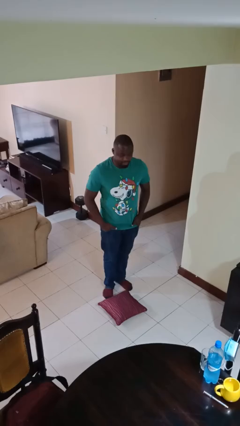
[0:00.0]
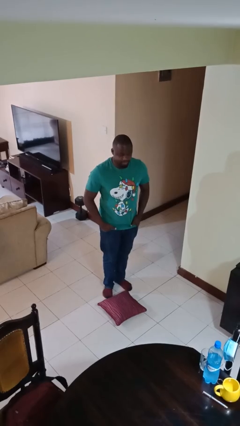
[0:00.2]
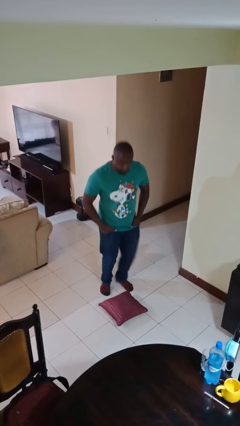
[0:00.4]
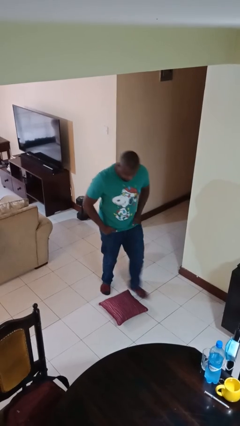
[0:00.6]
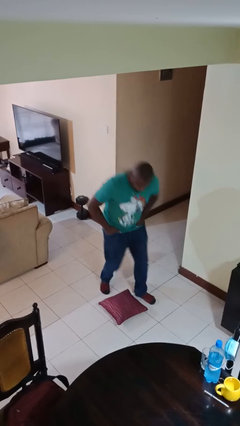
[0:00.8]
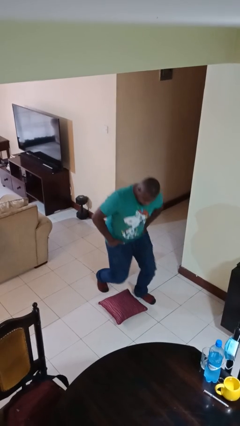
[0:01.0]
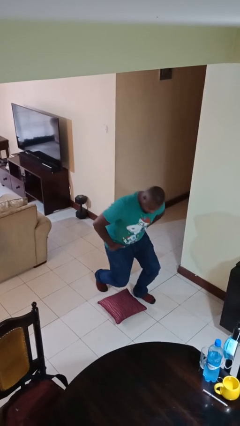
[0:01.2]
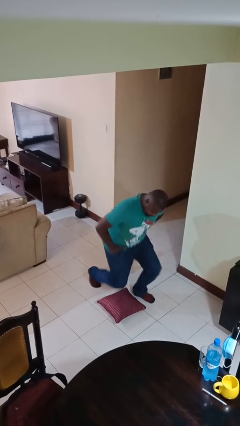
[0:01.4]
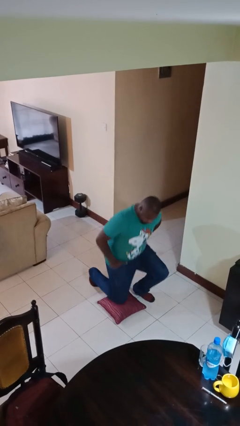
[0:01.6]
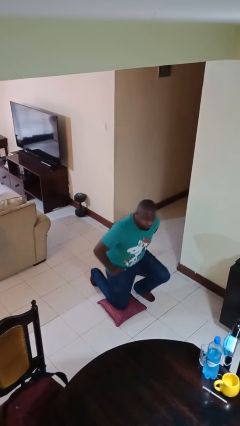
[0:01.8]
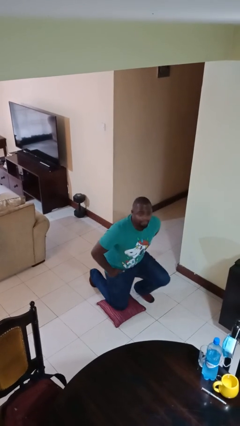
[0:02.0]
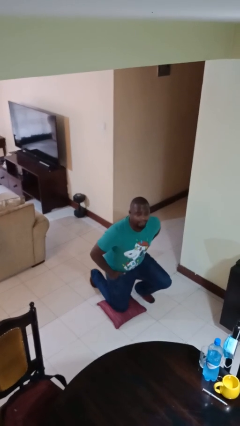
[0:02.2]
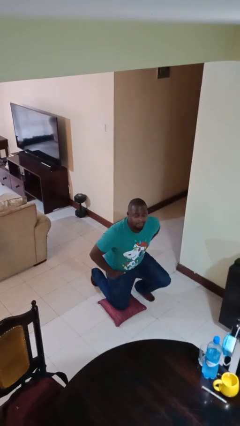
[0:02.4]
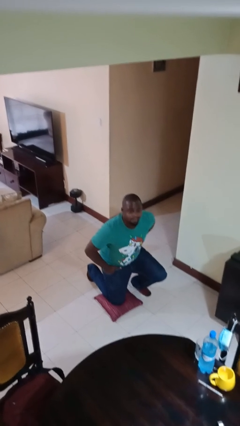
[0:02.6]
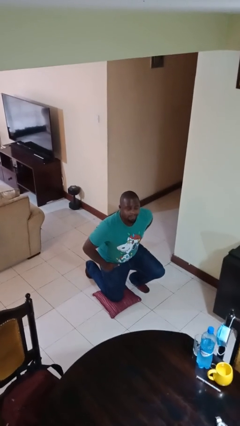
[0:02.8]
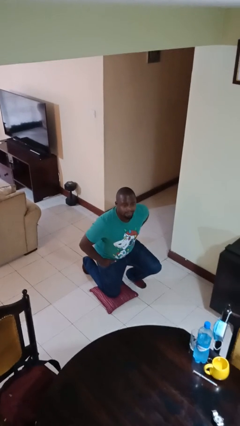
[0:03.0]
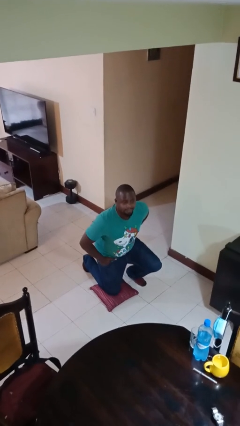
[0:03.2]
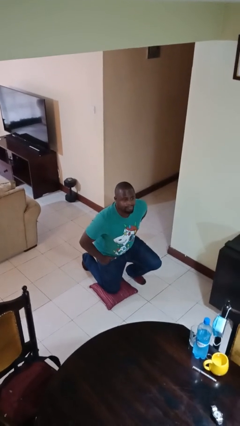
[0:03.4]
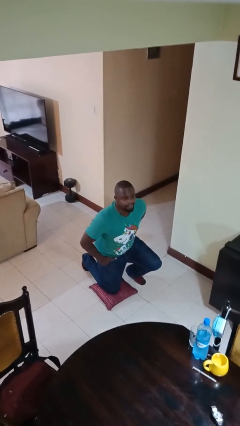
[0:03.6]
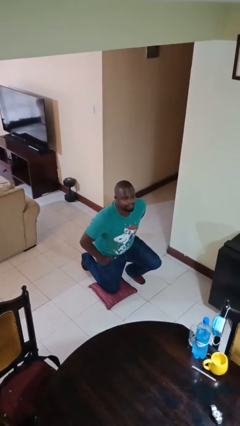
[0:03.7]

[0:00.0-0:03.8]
person kneels

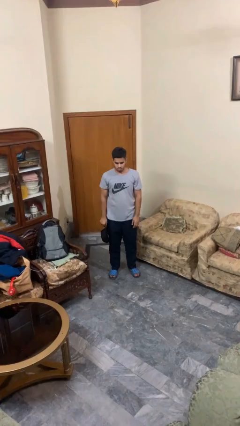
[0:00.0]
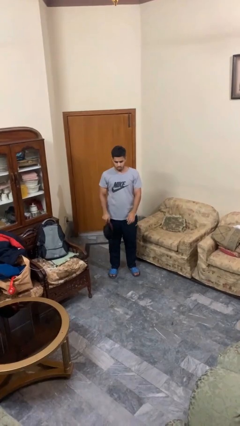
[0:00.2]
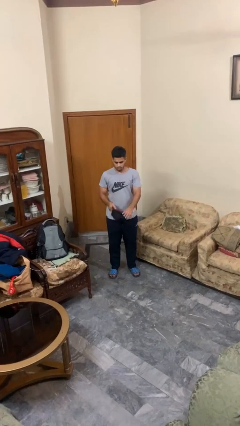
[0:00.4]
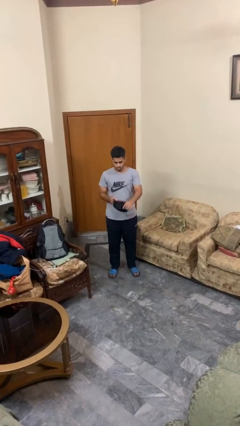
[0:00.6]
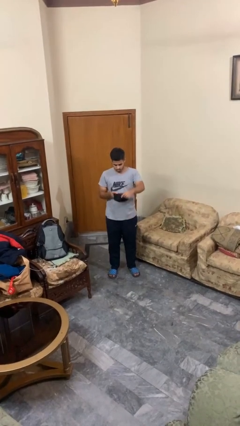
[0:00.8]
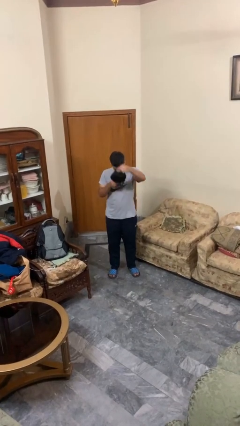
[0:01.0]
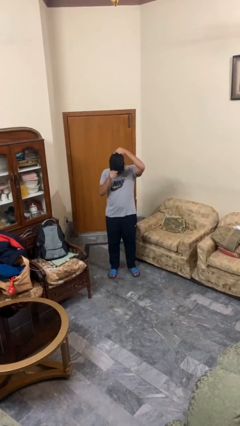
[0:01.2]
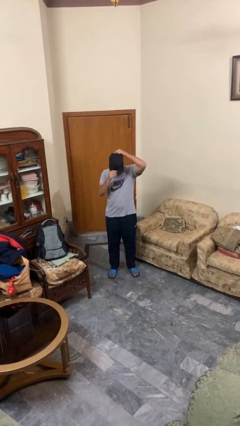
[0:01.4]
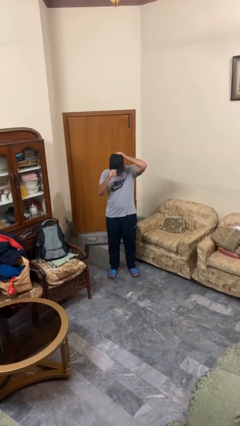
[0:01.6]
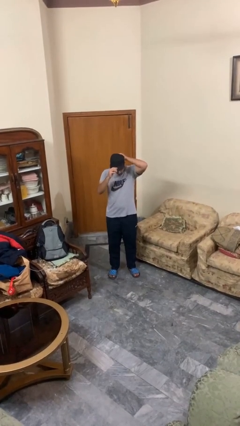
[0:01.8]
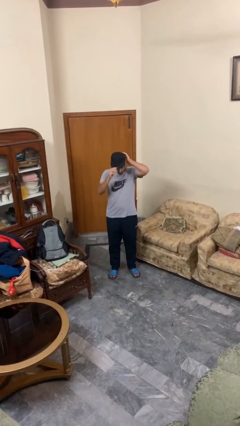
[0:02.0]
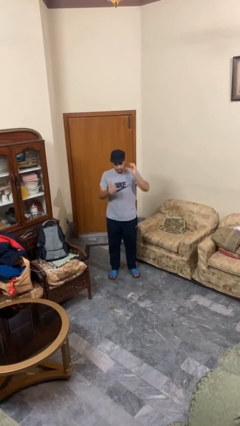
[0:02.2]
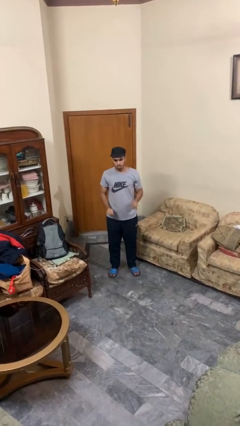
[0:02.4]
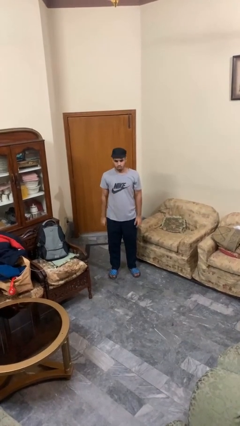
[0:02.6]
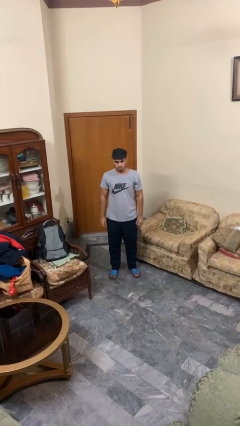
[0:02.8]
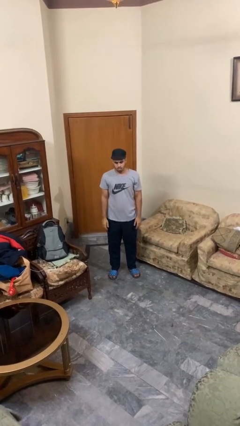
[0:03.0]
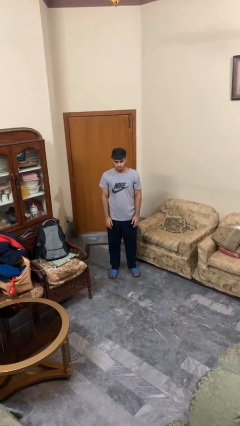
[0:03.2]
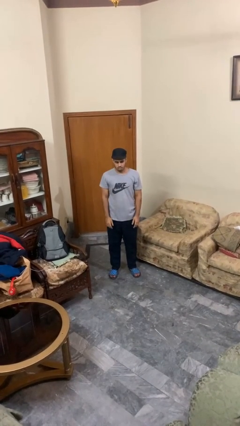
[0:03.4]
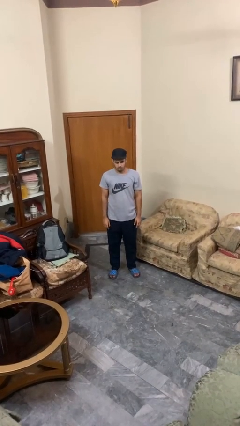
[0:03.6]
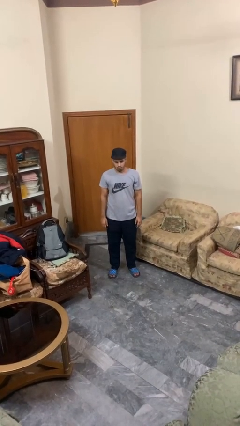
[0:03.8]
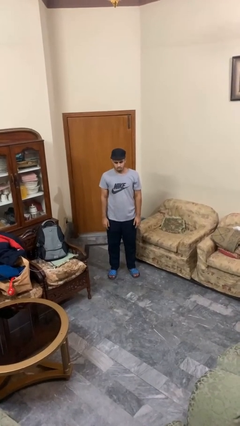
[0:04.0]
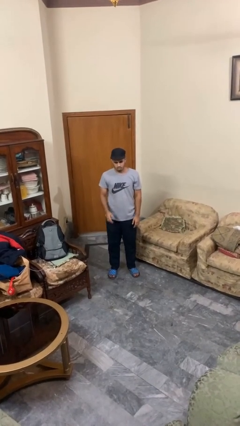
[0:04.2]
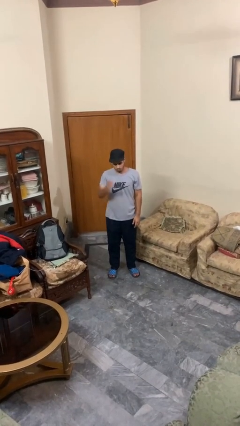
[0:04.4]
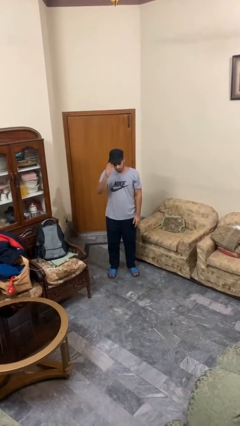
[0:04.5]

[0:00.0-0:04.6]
person puts on hat

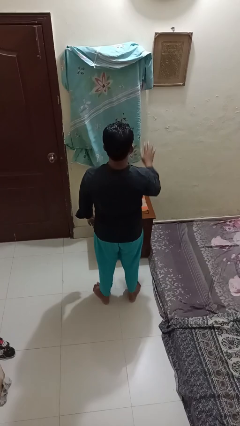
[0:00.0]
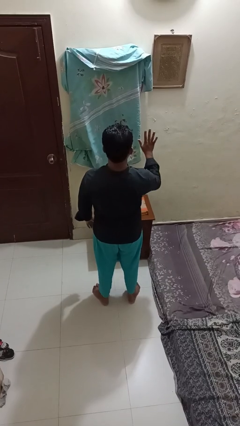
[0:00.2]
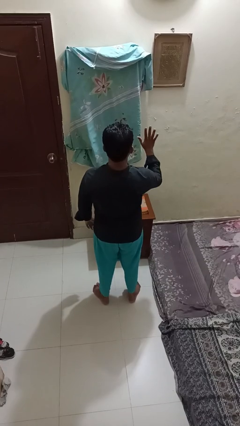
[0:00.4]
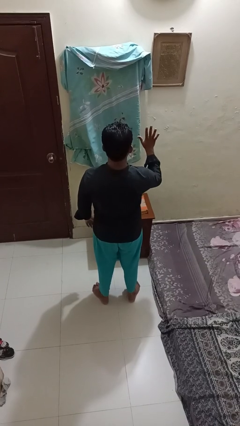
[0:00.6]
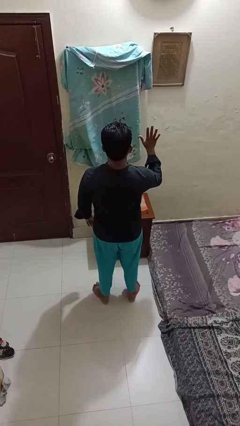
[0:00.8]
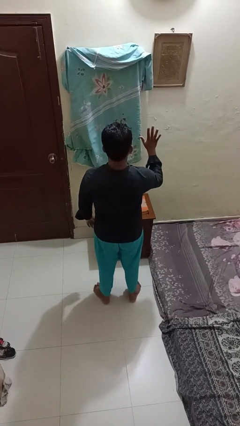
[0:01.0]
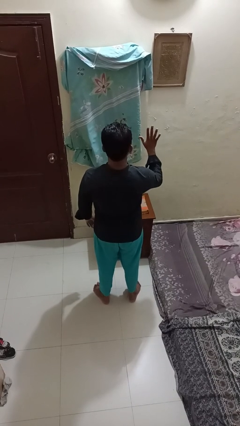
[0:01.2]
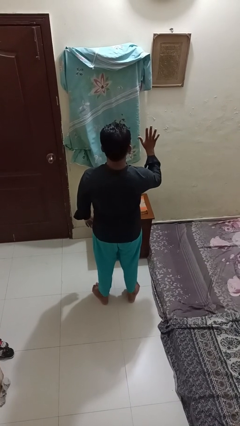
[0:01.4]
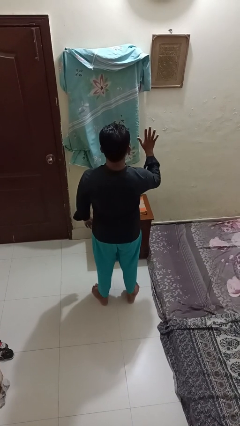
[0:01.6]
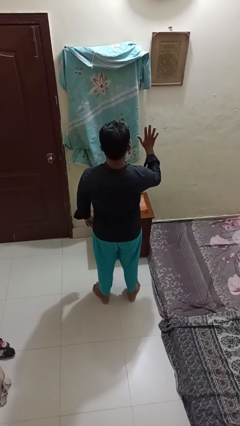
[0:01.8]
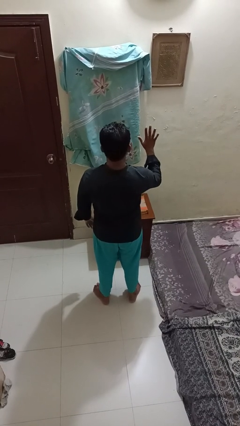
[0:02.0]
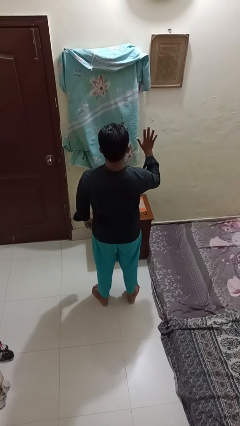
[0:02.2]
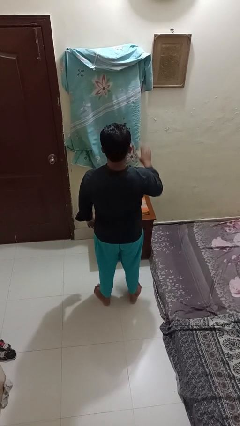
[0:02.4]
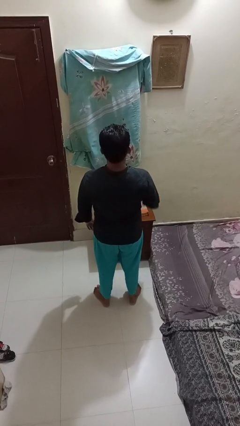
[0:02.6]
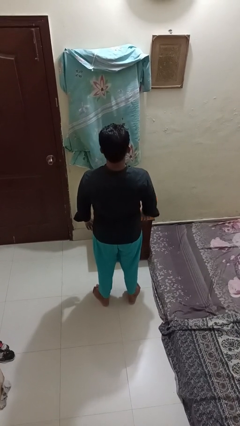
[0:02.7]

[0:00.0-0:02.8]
person gestures number five

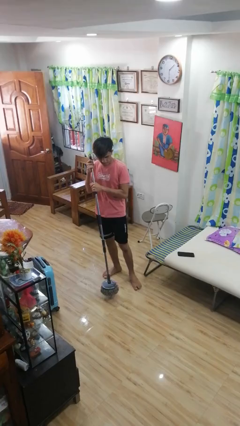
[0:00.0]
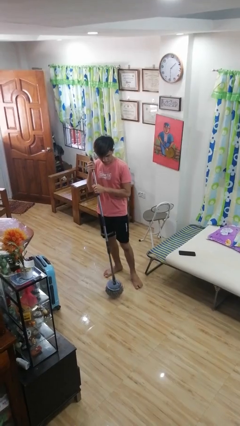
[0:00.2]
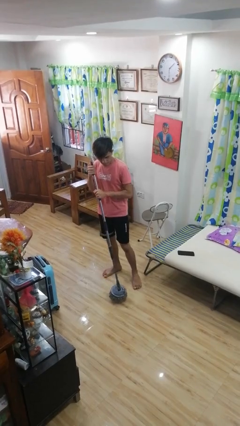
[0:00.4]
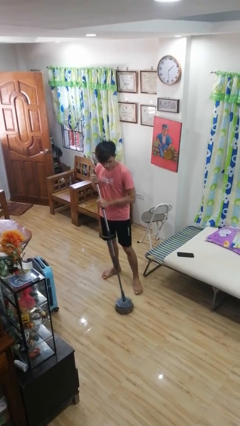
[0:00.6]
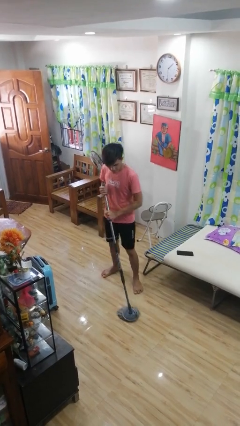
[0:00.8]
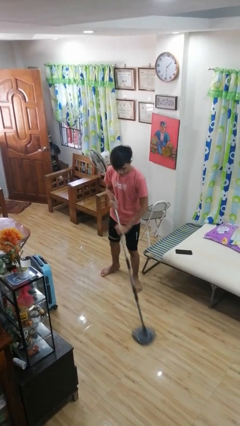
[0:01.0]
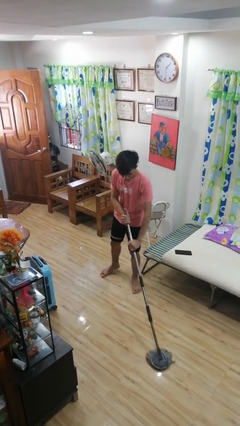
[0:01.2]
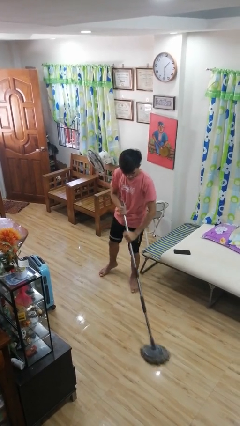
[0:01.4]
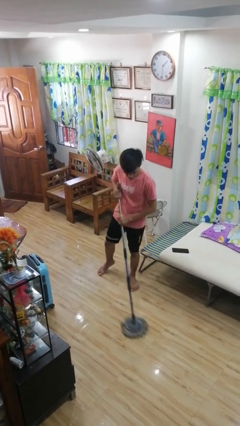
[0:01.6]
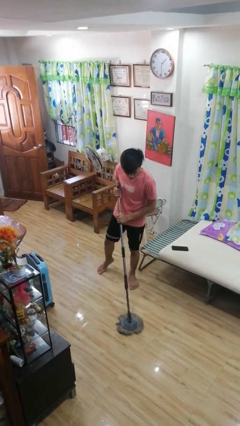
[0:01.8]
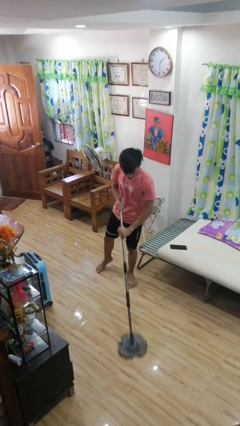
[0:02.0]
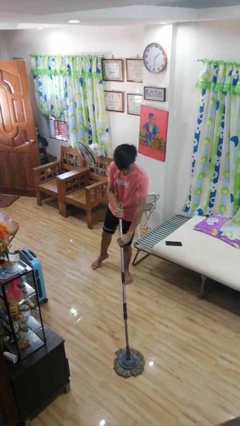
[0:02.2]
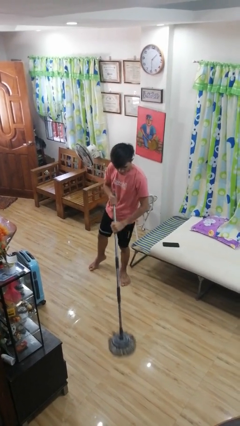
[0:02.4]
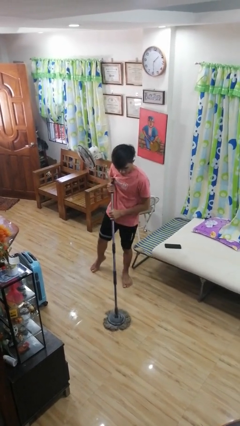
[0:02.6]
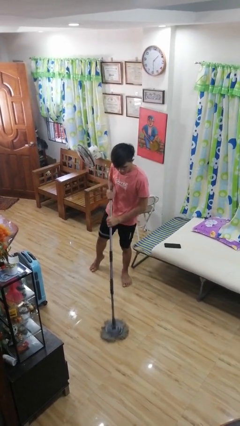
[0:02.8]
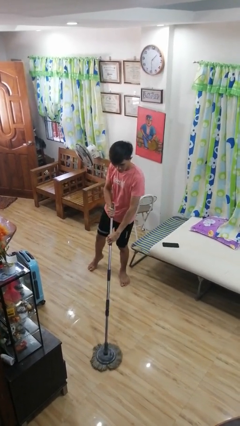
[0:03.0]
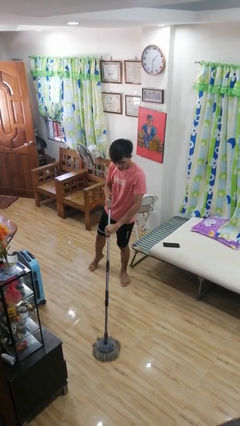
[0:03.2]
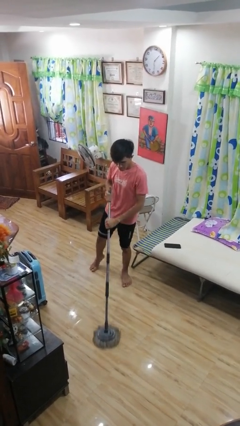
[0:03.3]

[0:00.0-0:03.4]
person mops

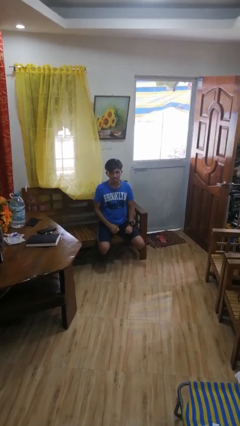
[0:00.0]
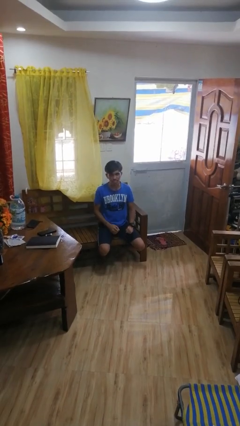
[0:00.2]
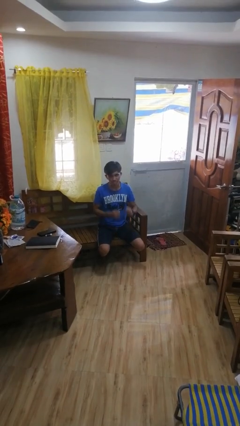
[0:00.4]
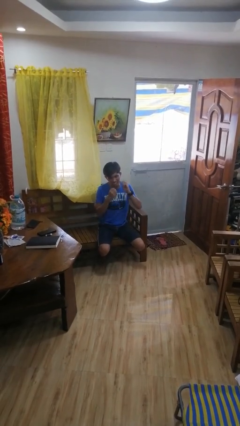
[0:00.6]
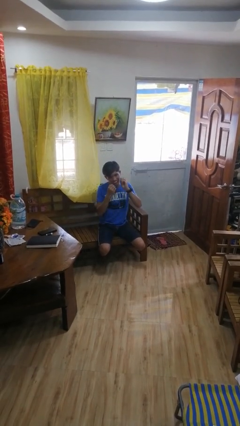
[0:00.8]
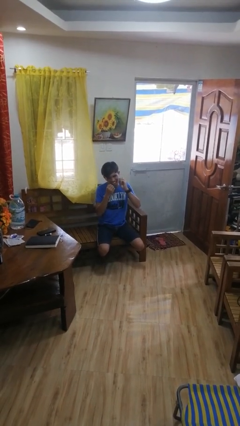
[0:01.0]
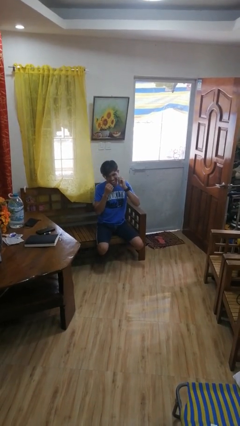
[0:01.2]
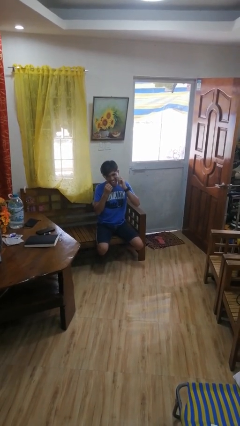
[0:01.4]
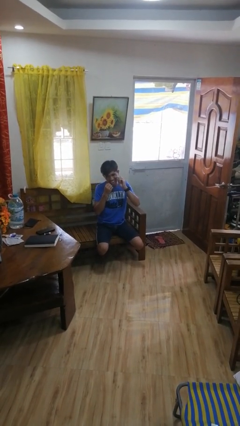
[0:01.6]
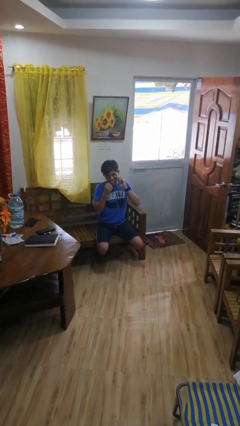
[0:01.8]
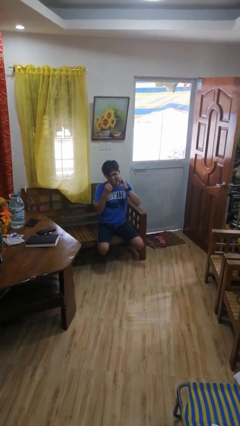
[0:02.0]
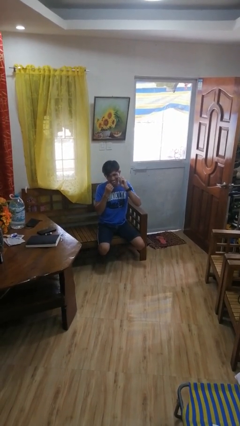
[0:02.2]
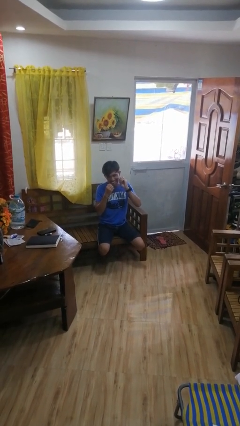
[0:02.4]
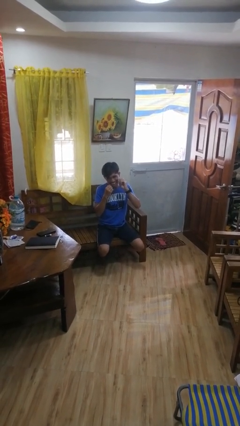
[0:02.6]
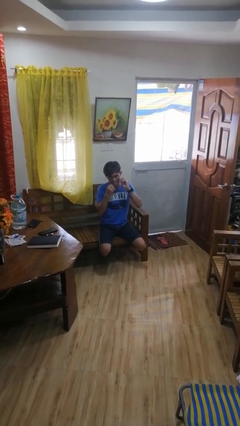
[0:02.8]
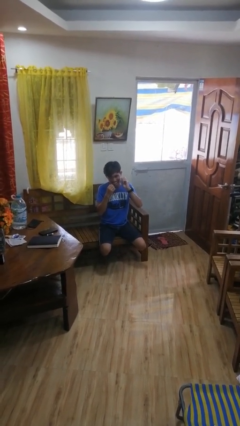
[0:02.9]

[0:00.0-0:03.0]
person flosses

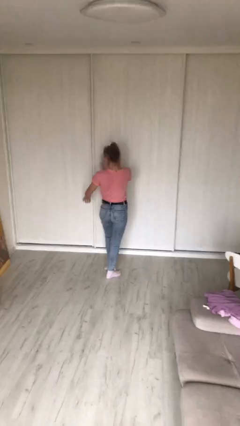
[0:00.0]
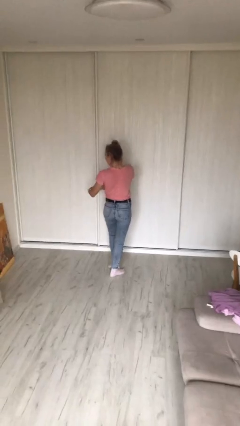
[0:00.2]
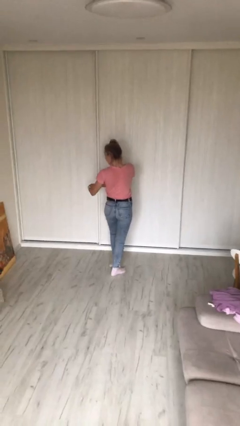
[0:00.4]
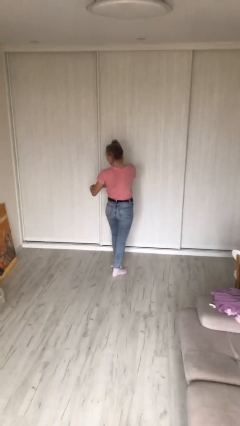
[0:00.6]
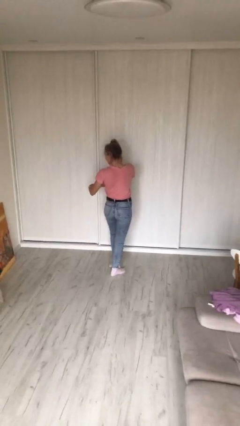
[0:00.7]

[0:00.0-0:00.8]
person swats bug
